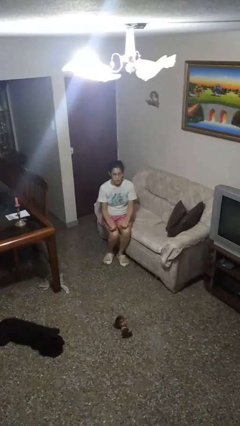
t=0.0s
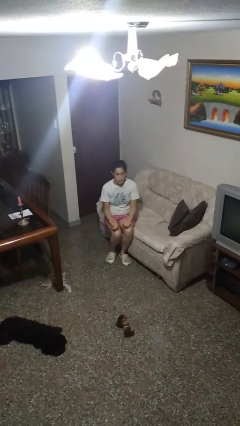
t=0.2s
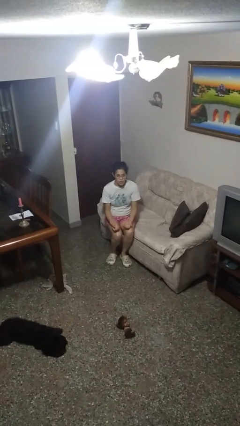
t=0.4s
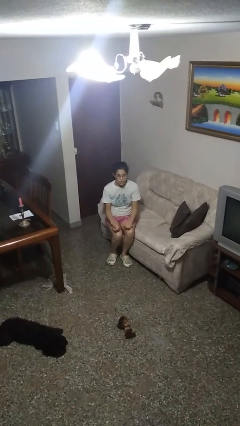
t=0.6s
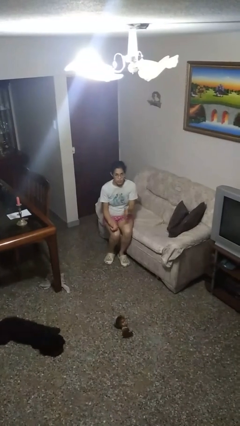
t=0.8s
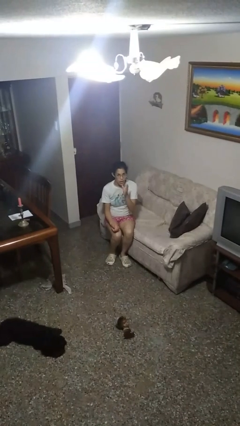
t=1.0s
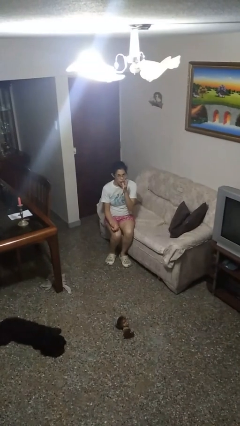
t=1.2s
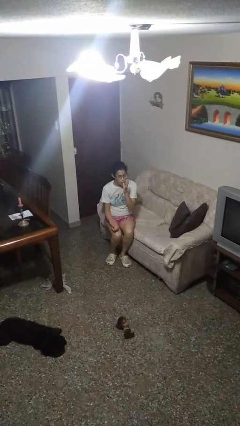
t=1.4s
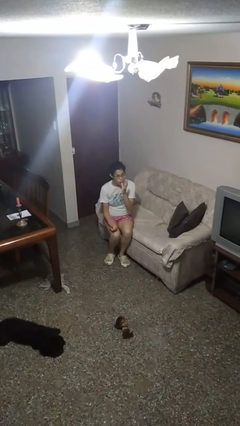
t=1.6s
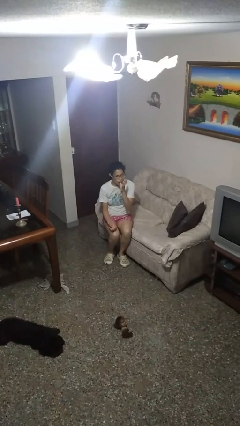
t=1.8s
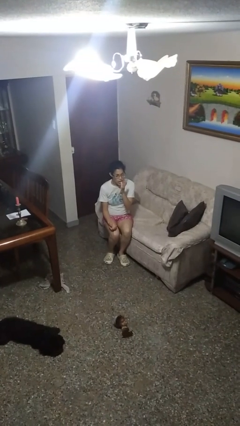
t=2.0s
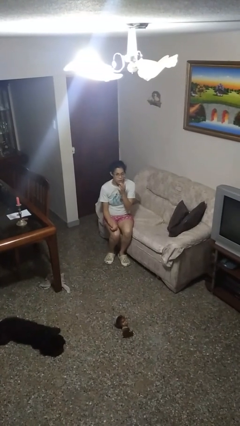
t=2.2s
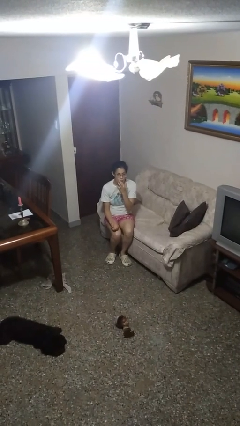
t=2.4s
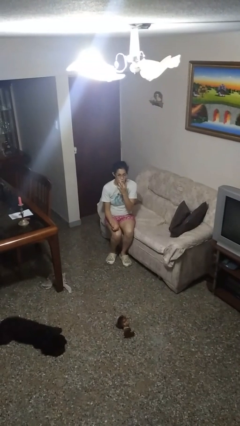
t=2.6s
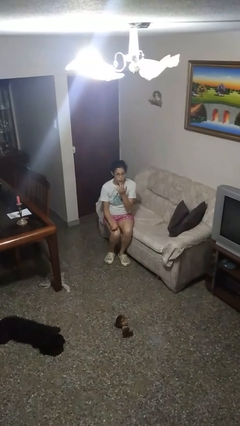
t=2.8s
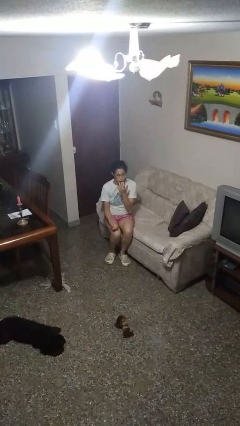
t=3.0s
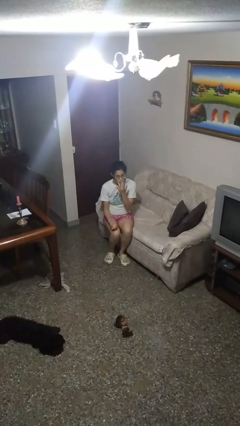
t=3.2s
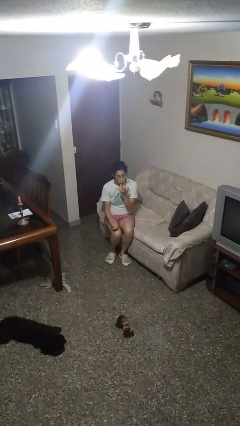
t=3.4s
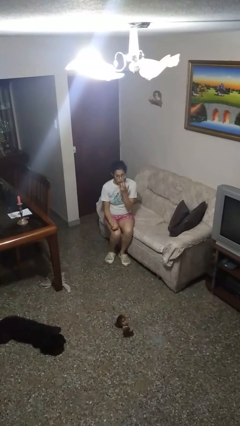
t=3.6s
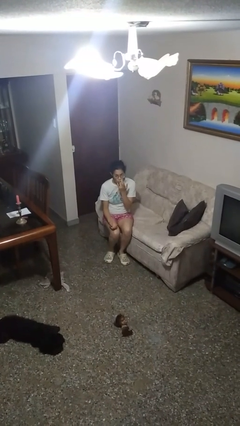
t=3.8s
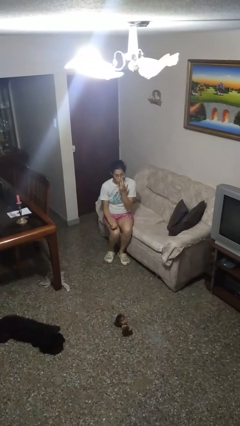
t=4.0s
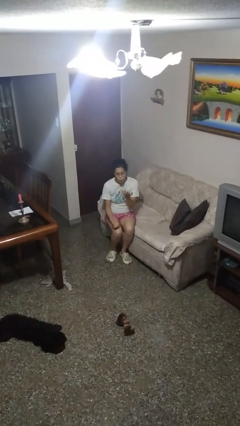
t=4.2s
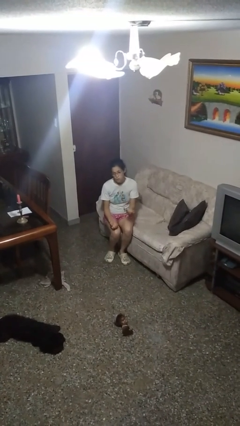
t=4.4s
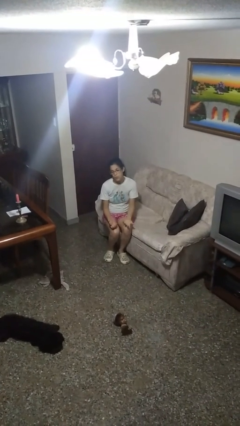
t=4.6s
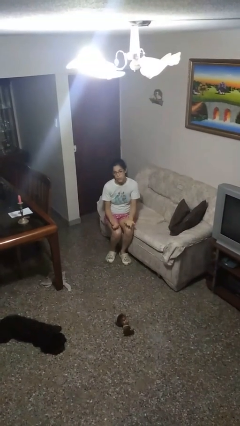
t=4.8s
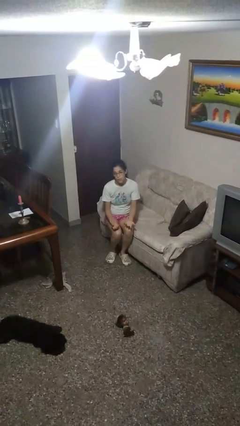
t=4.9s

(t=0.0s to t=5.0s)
person licks fingers

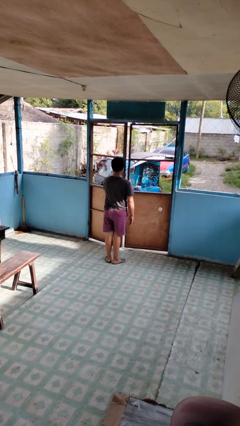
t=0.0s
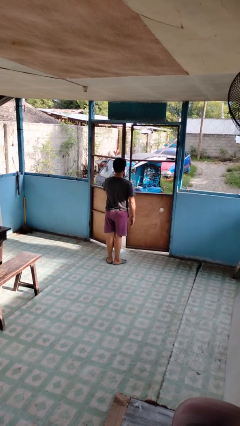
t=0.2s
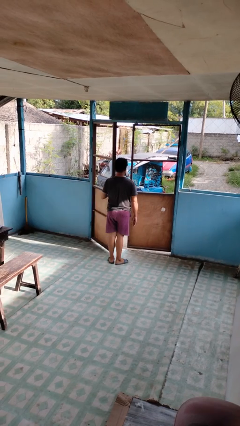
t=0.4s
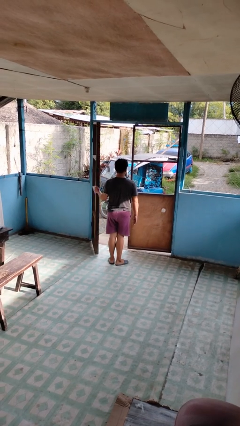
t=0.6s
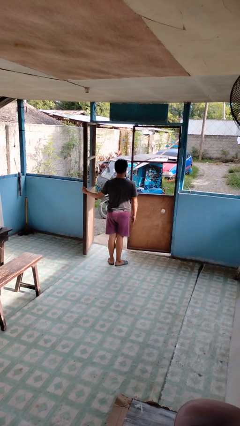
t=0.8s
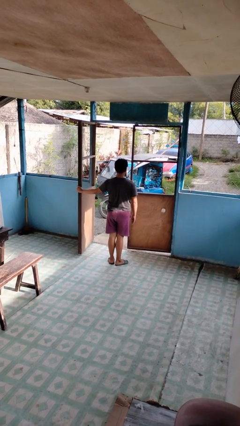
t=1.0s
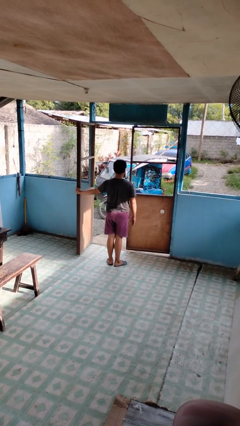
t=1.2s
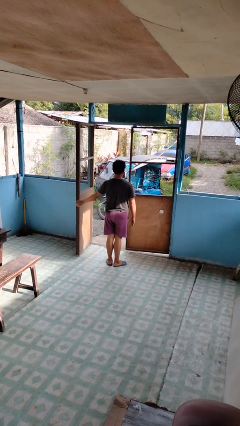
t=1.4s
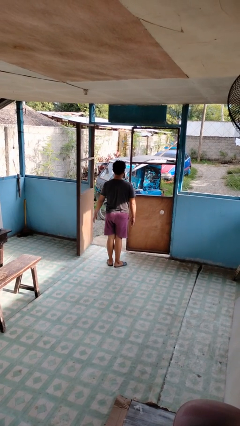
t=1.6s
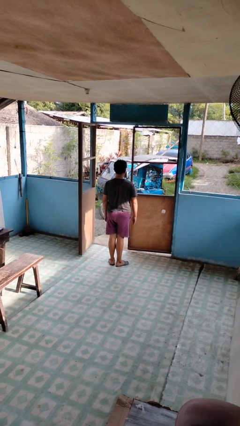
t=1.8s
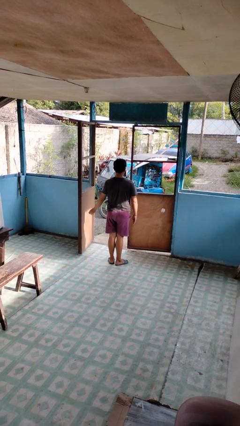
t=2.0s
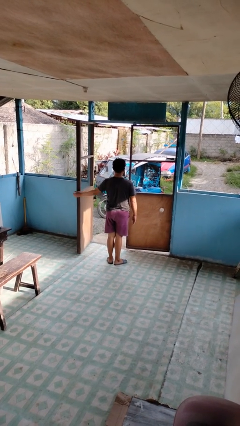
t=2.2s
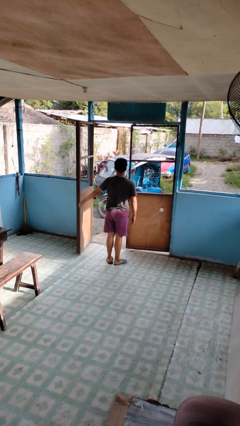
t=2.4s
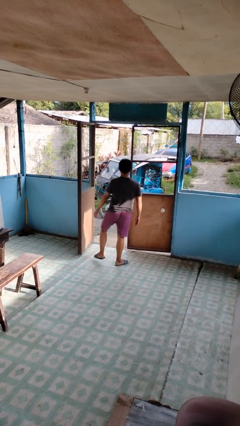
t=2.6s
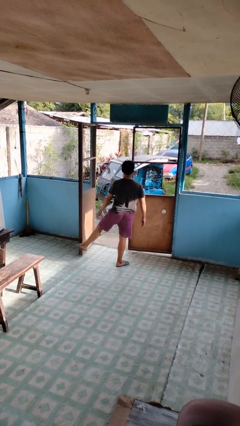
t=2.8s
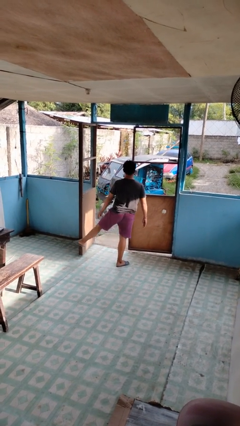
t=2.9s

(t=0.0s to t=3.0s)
person opens facility door

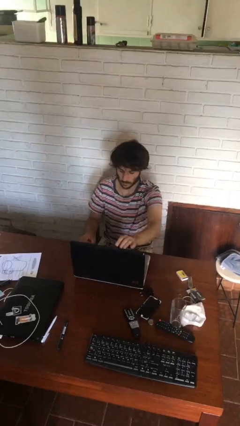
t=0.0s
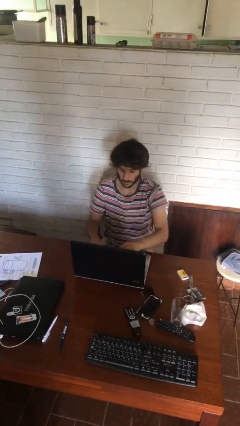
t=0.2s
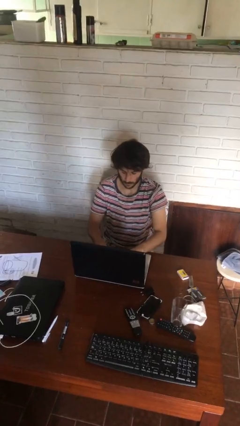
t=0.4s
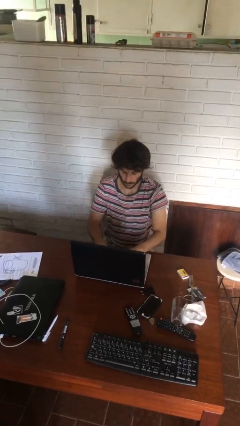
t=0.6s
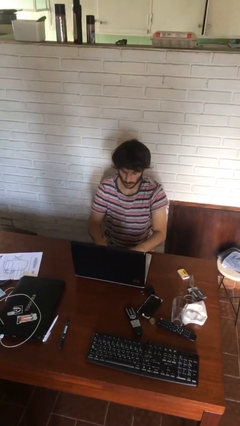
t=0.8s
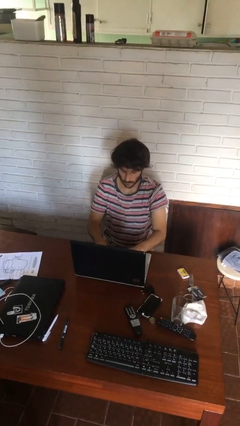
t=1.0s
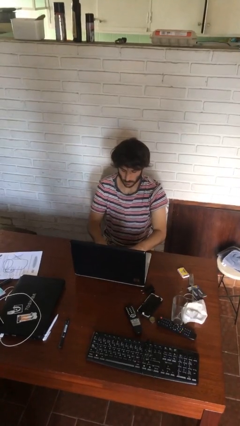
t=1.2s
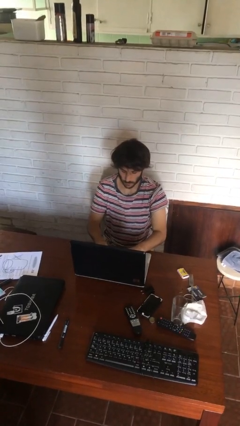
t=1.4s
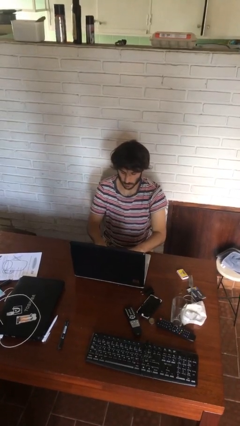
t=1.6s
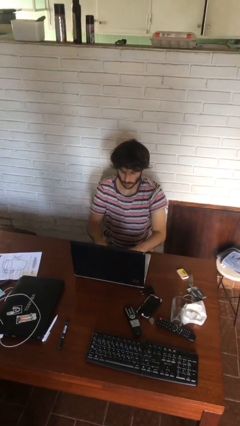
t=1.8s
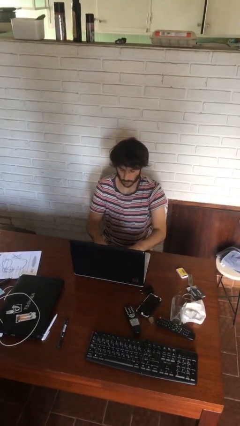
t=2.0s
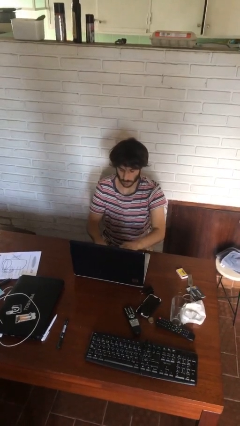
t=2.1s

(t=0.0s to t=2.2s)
person interacts with laptop

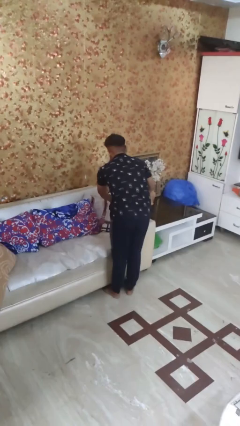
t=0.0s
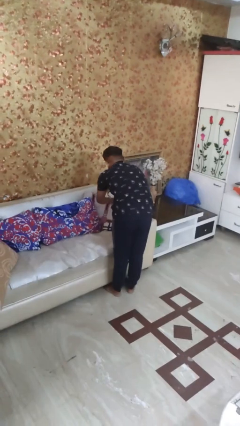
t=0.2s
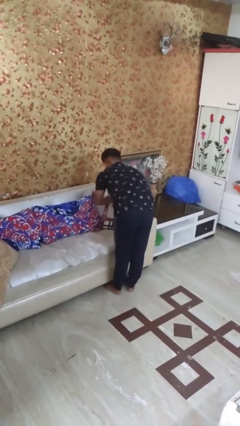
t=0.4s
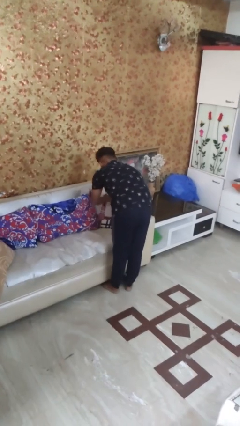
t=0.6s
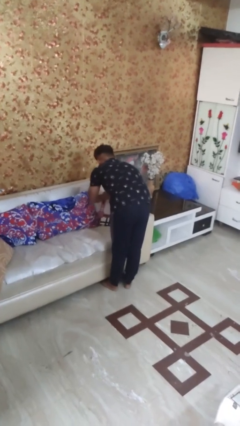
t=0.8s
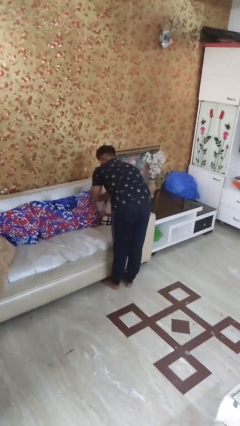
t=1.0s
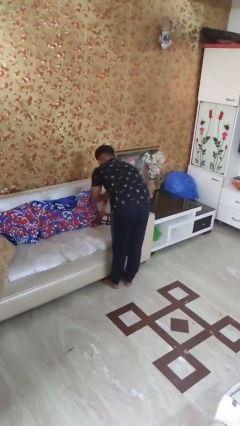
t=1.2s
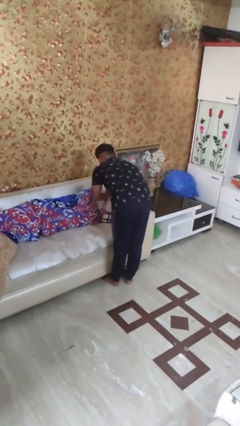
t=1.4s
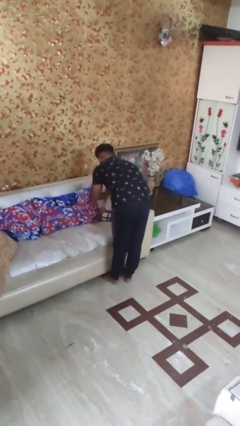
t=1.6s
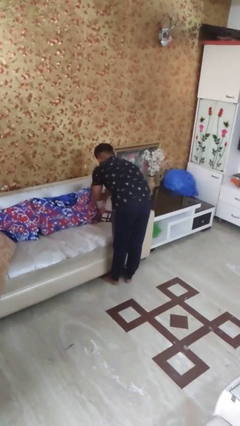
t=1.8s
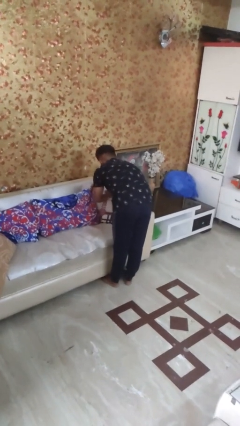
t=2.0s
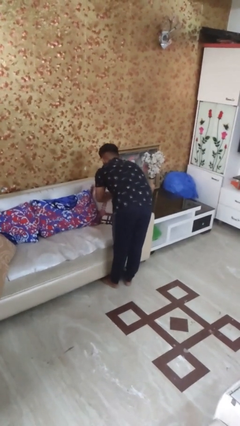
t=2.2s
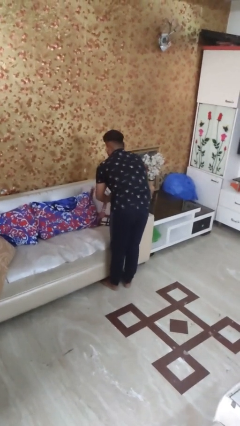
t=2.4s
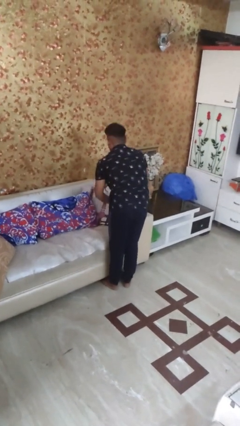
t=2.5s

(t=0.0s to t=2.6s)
person searches in couch

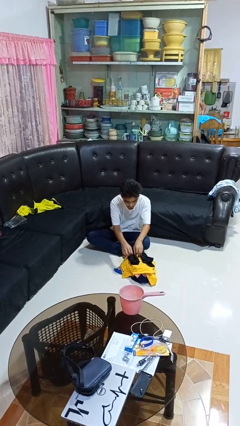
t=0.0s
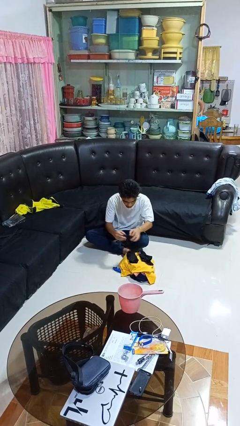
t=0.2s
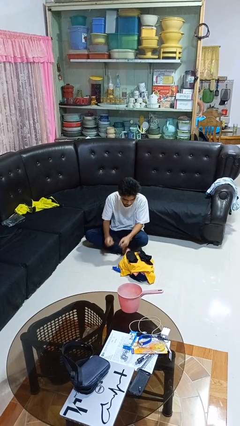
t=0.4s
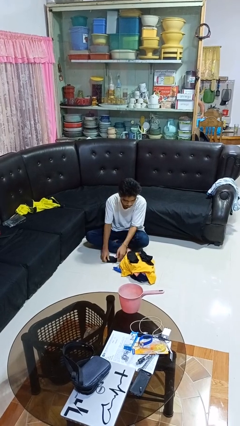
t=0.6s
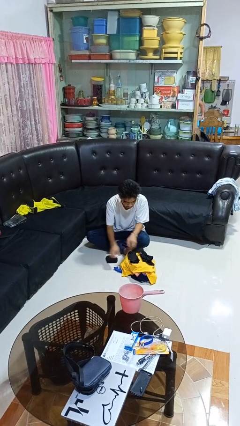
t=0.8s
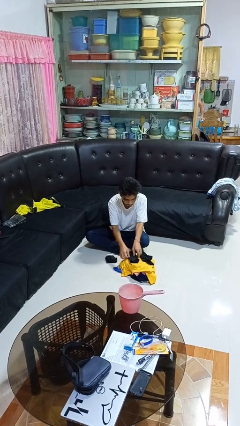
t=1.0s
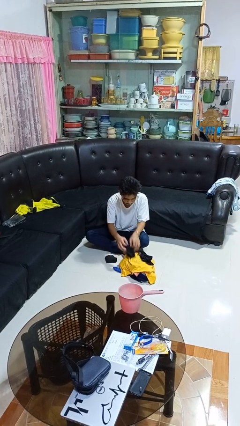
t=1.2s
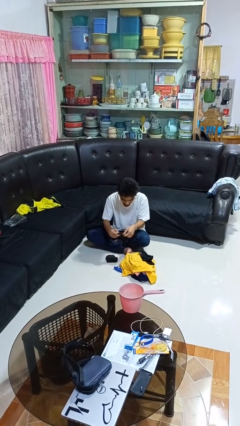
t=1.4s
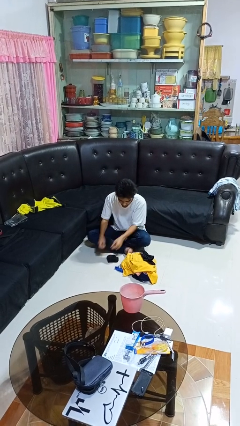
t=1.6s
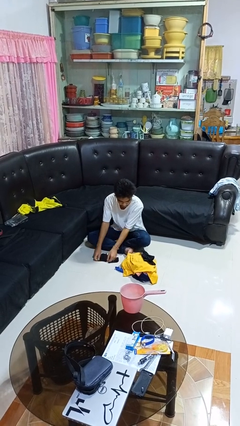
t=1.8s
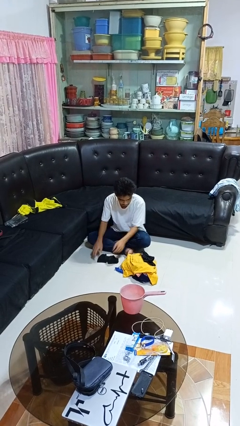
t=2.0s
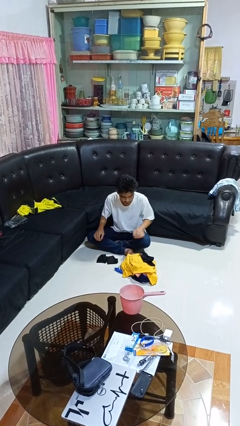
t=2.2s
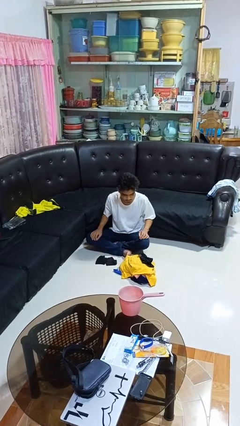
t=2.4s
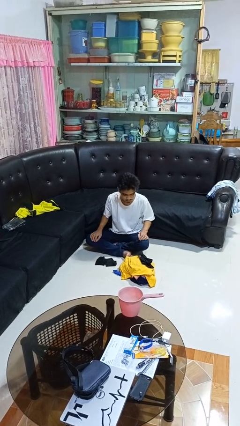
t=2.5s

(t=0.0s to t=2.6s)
person folds socks

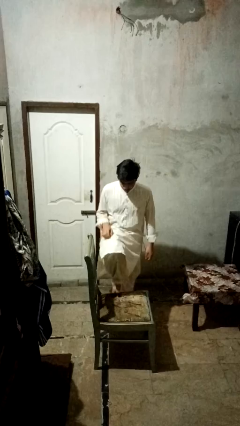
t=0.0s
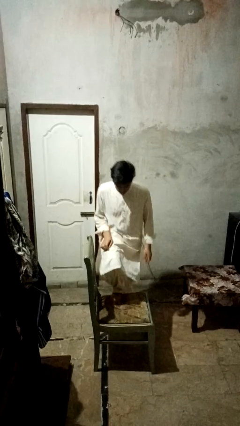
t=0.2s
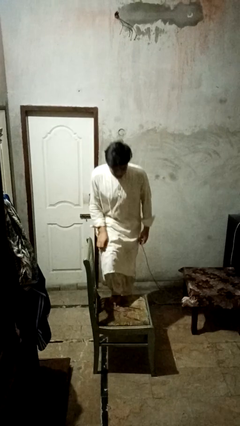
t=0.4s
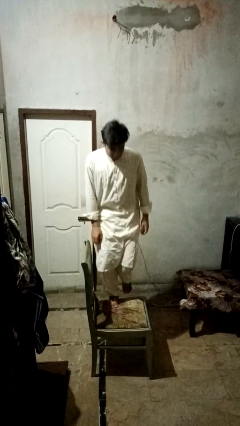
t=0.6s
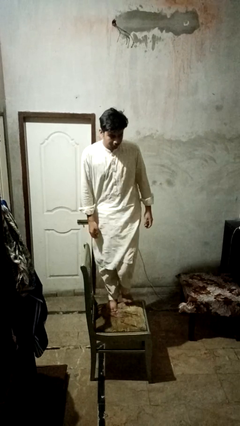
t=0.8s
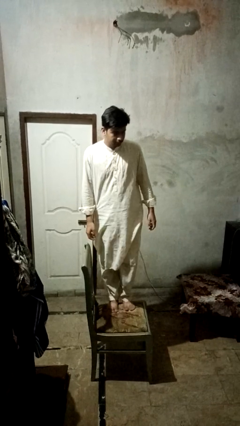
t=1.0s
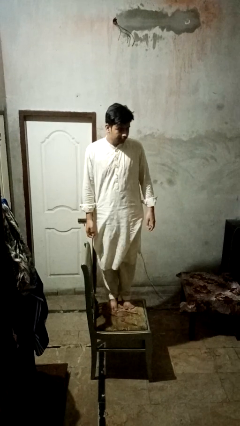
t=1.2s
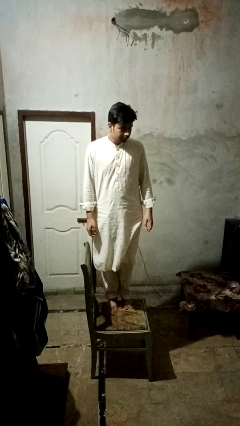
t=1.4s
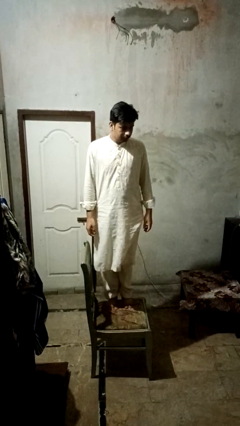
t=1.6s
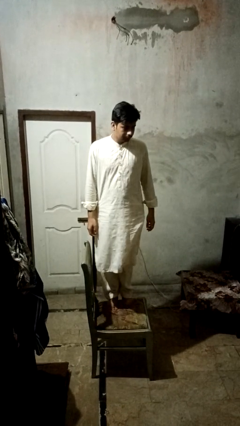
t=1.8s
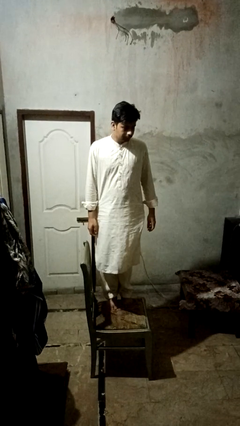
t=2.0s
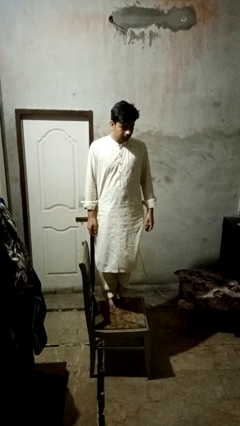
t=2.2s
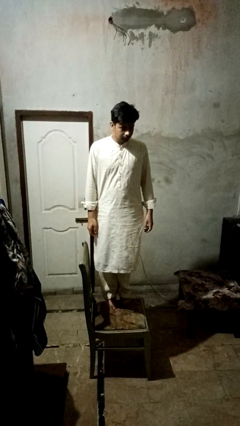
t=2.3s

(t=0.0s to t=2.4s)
person climbs on chair
